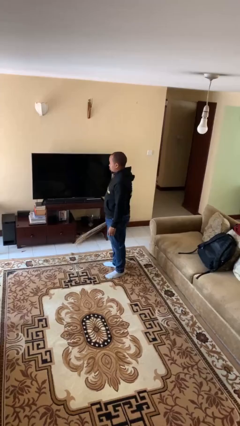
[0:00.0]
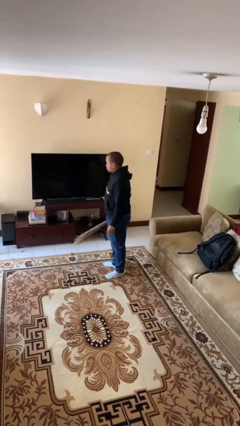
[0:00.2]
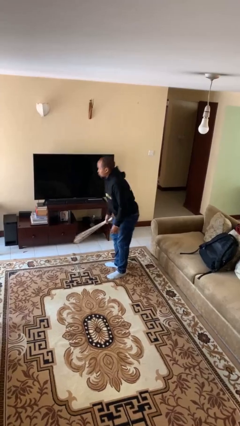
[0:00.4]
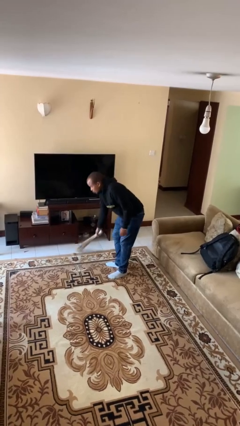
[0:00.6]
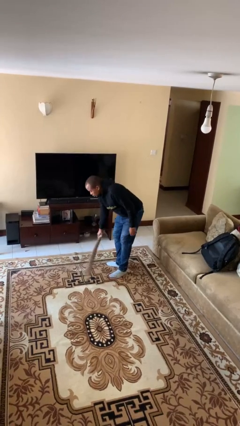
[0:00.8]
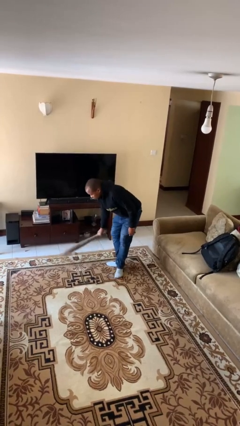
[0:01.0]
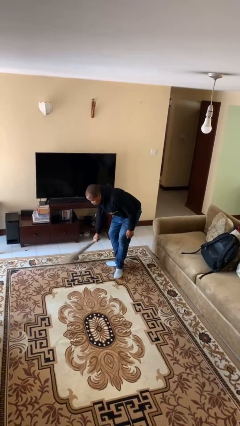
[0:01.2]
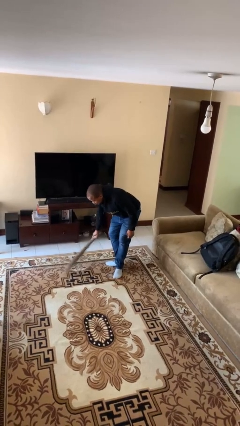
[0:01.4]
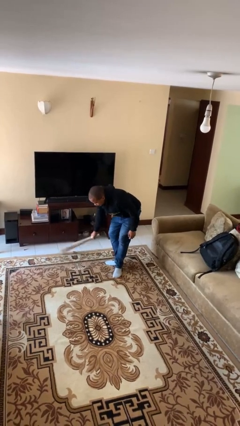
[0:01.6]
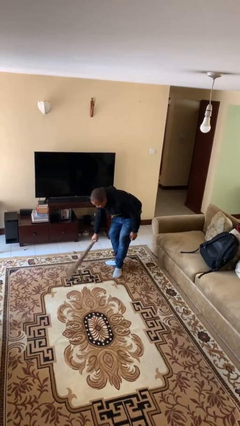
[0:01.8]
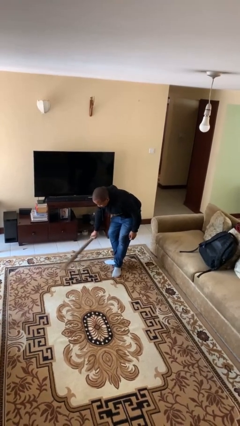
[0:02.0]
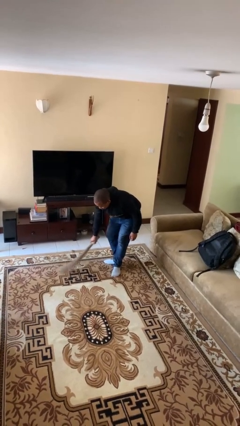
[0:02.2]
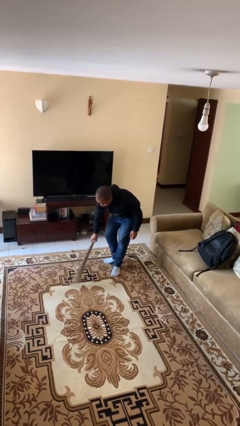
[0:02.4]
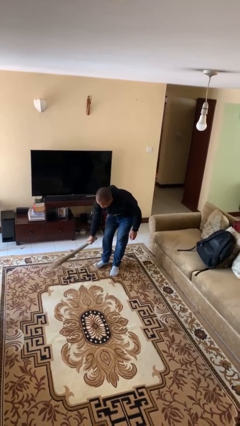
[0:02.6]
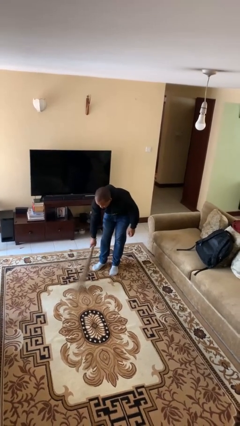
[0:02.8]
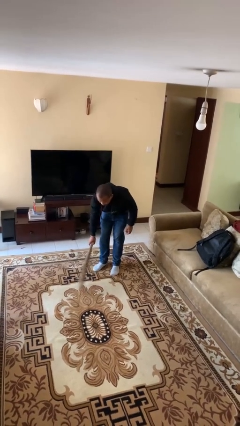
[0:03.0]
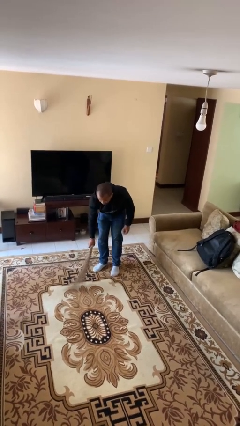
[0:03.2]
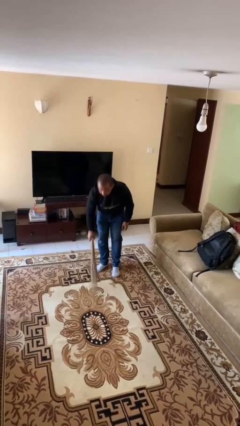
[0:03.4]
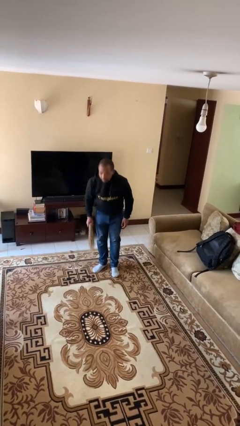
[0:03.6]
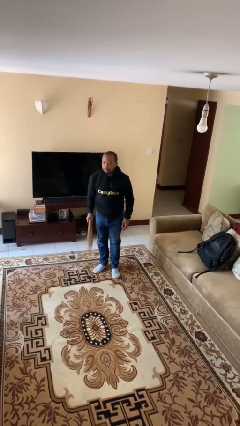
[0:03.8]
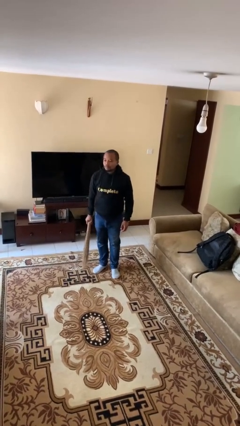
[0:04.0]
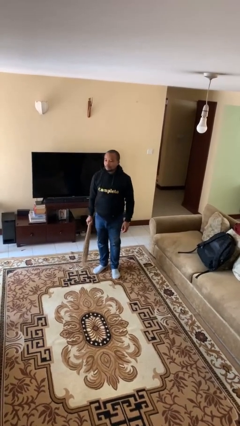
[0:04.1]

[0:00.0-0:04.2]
person sweeps floor

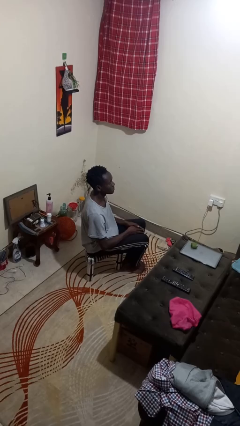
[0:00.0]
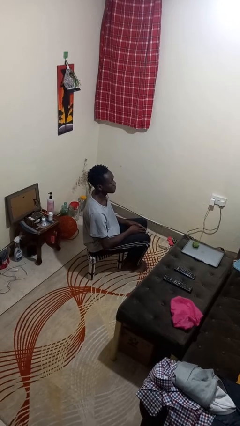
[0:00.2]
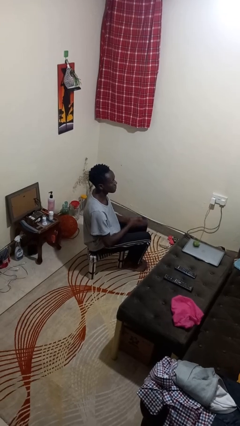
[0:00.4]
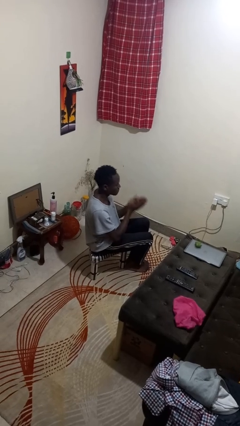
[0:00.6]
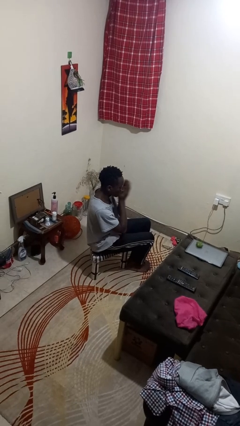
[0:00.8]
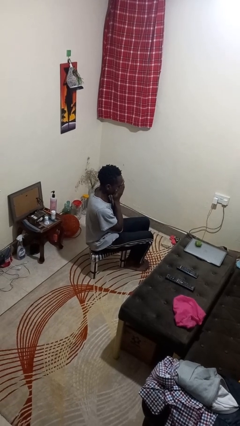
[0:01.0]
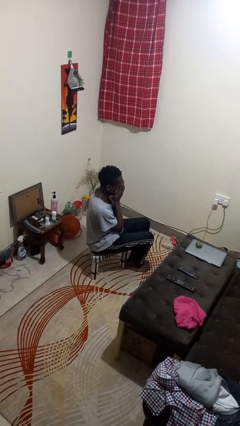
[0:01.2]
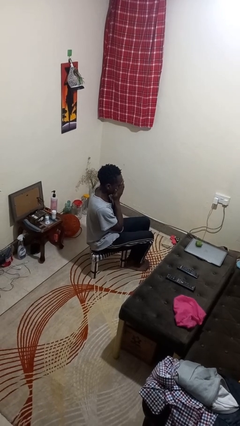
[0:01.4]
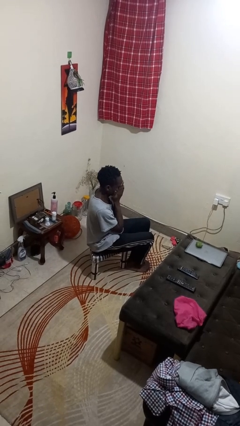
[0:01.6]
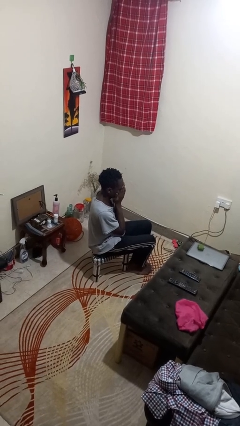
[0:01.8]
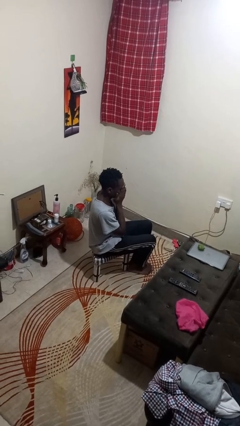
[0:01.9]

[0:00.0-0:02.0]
person covers face with hands

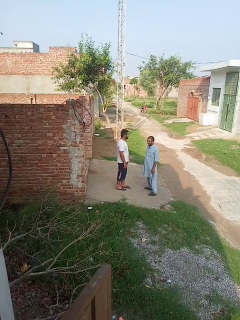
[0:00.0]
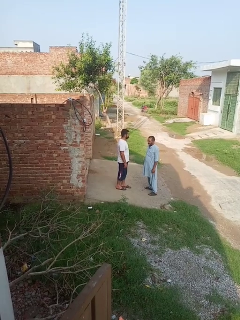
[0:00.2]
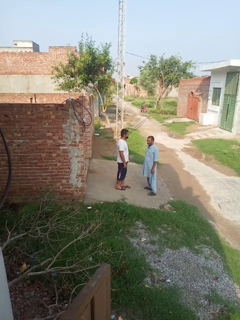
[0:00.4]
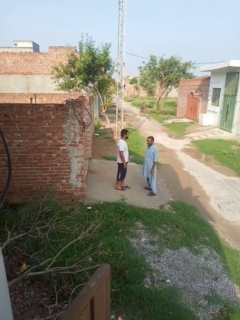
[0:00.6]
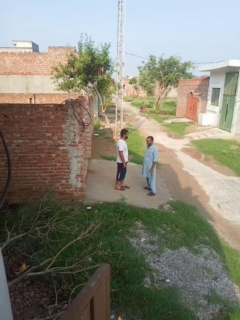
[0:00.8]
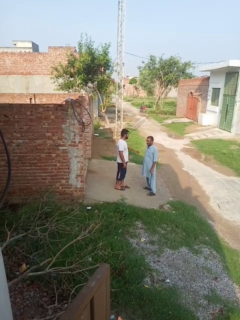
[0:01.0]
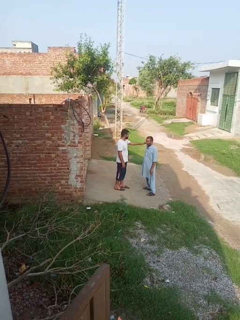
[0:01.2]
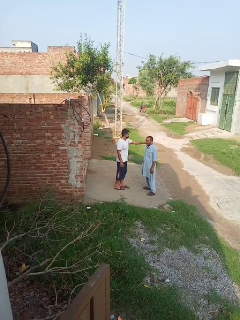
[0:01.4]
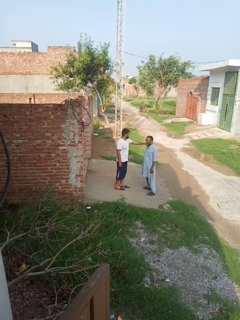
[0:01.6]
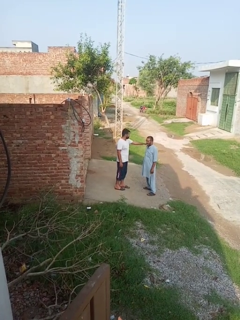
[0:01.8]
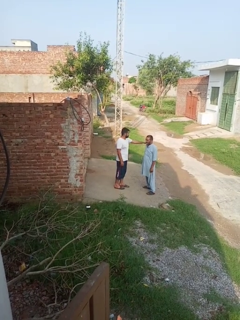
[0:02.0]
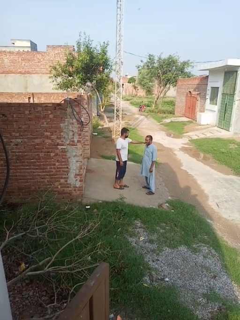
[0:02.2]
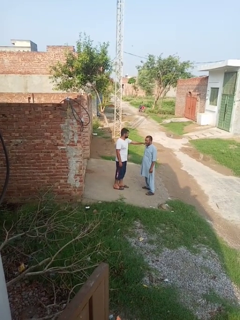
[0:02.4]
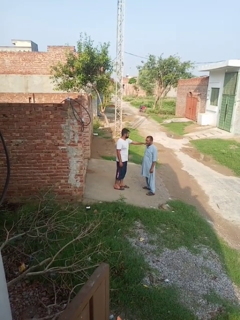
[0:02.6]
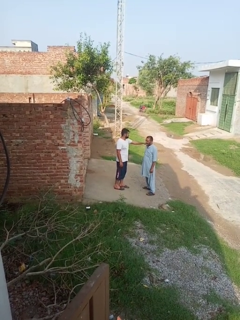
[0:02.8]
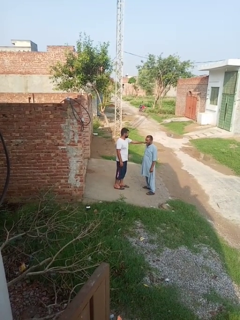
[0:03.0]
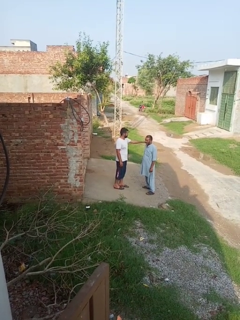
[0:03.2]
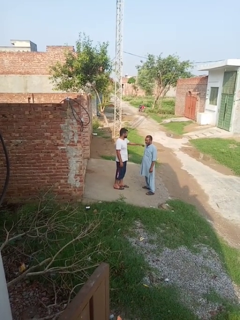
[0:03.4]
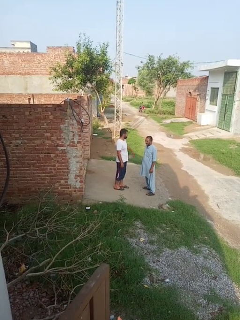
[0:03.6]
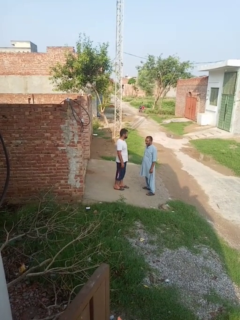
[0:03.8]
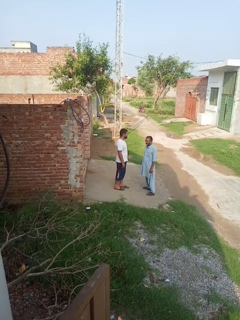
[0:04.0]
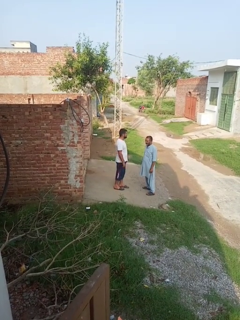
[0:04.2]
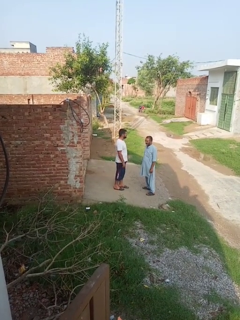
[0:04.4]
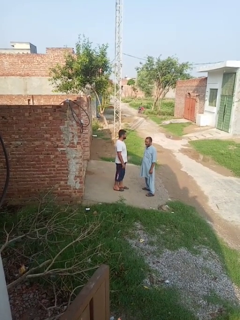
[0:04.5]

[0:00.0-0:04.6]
person pounds shoulders of person

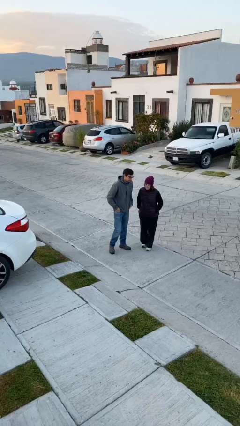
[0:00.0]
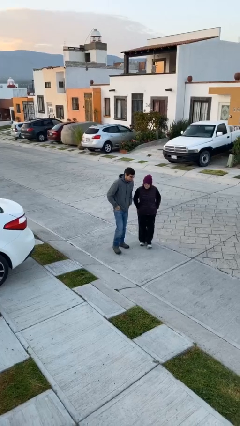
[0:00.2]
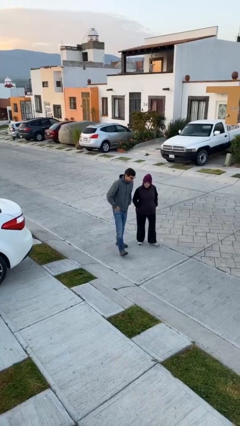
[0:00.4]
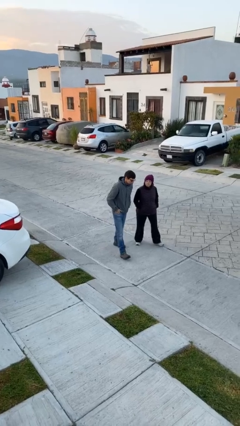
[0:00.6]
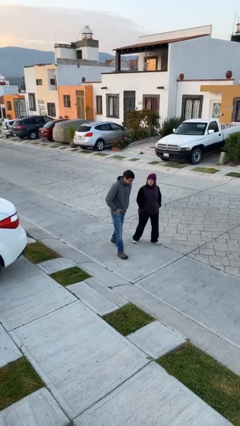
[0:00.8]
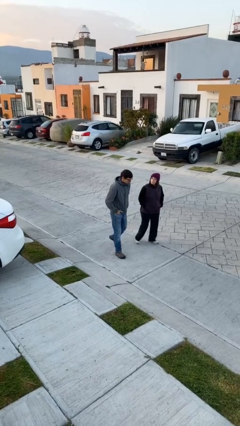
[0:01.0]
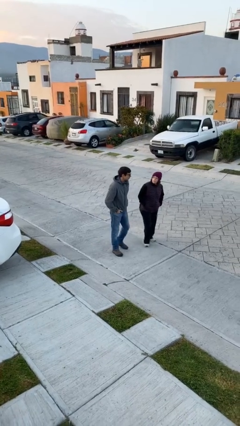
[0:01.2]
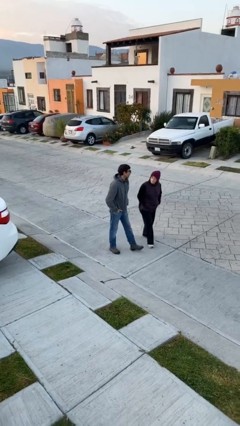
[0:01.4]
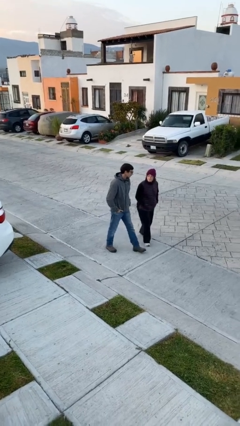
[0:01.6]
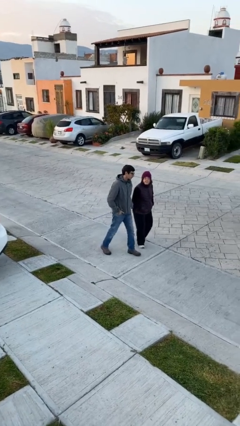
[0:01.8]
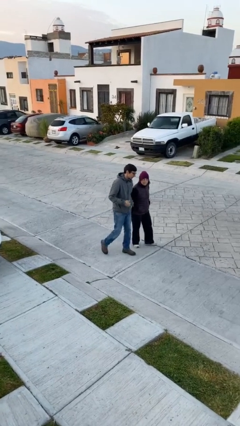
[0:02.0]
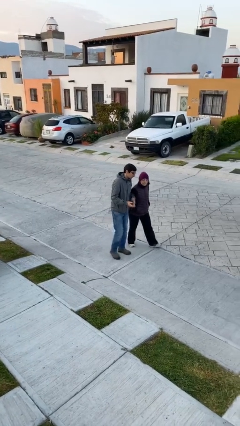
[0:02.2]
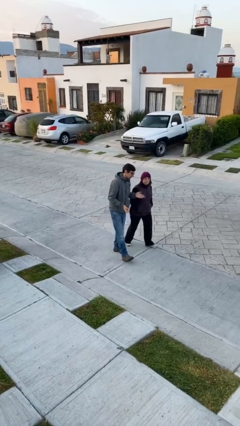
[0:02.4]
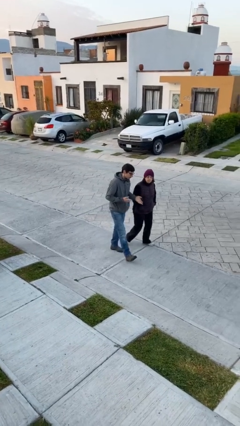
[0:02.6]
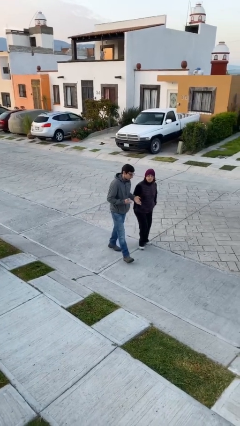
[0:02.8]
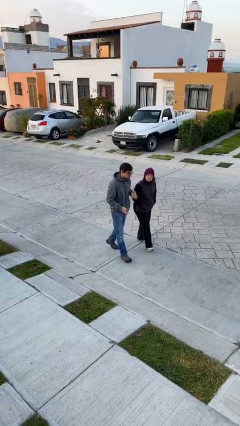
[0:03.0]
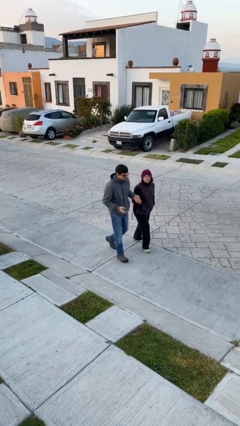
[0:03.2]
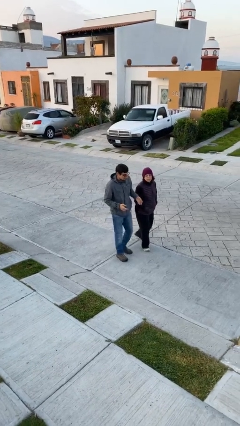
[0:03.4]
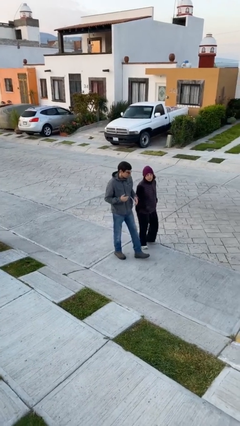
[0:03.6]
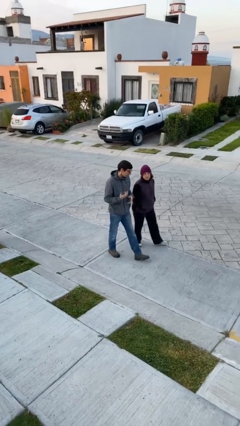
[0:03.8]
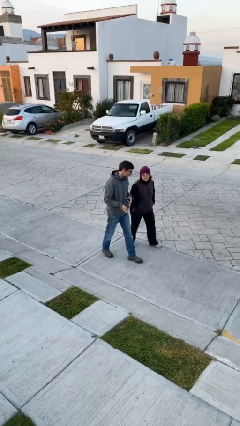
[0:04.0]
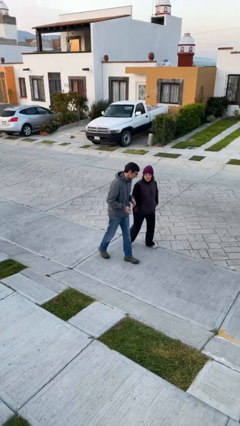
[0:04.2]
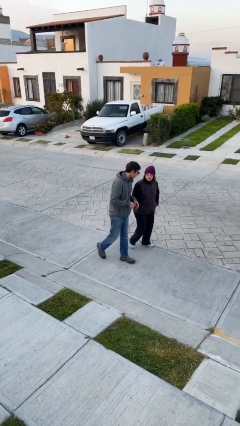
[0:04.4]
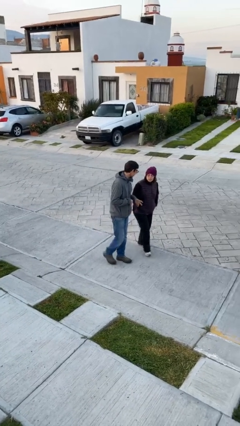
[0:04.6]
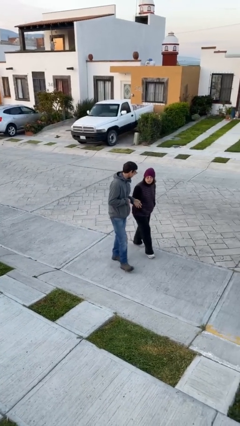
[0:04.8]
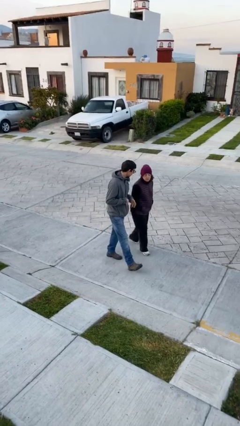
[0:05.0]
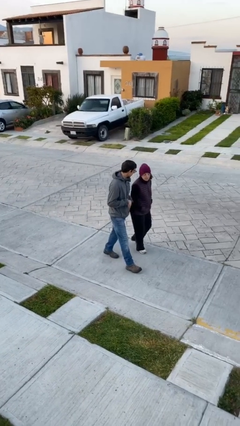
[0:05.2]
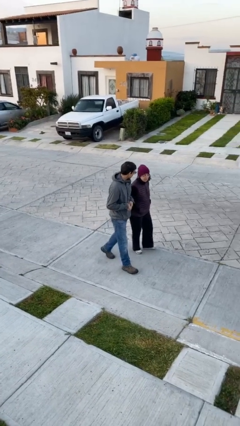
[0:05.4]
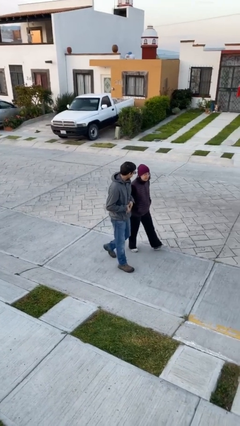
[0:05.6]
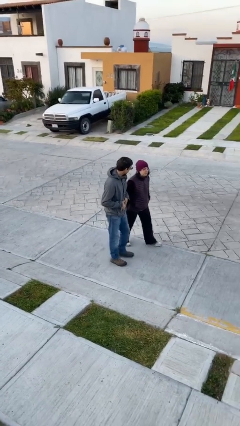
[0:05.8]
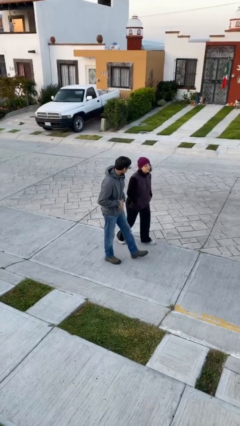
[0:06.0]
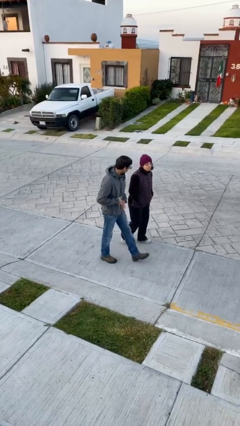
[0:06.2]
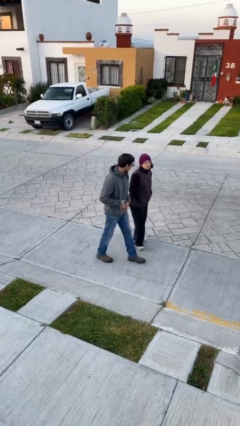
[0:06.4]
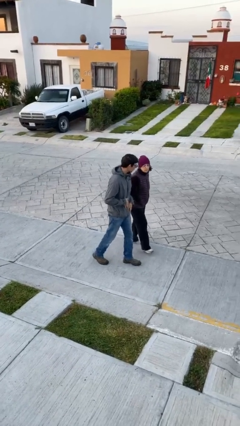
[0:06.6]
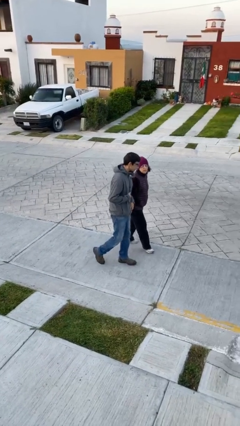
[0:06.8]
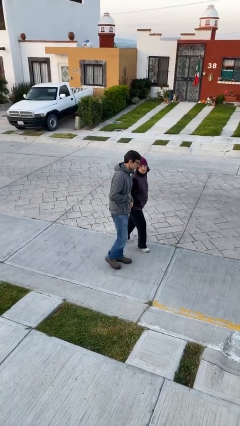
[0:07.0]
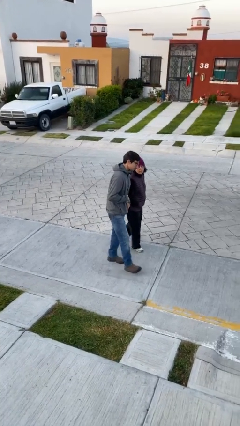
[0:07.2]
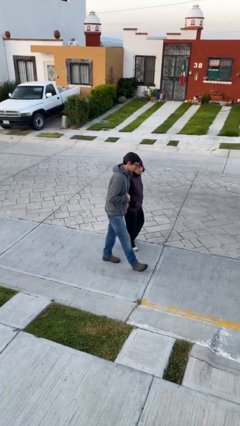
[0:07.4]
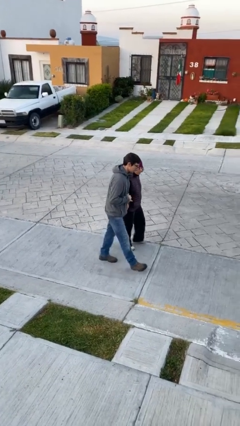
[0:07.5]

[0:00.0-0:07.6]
person talks to person
